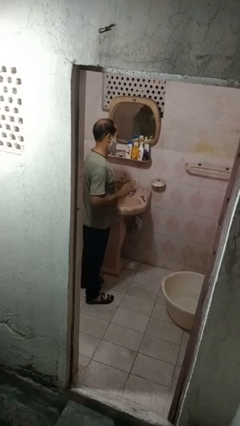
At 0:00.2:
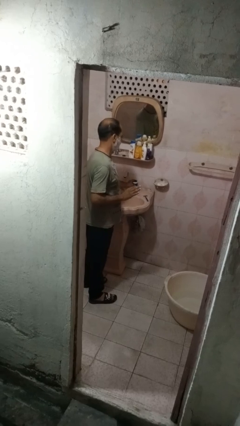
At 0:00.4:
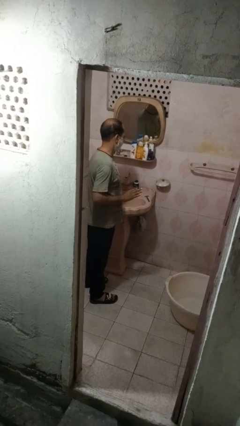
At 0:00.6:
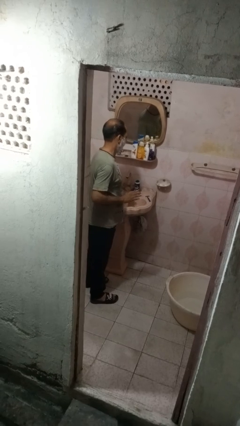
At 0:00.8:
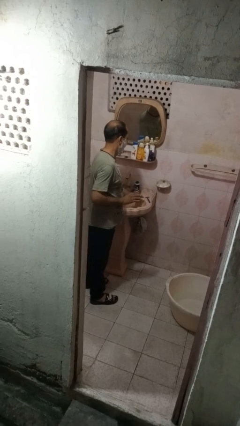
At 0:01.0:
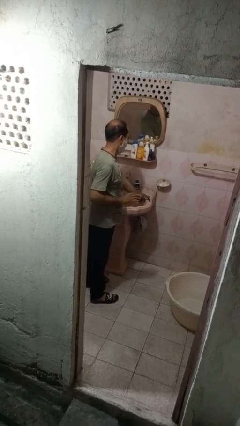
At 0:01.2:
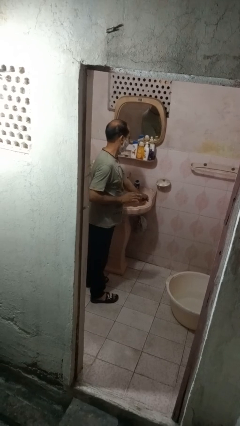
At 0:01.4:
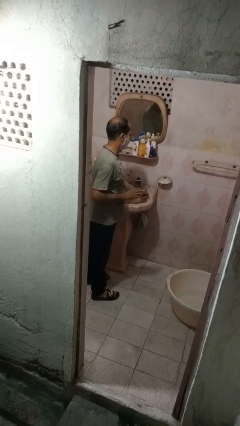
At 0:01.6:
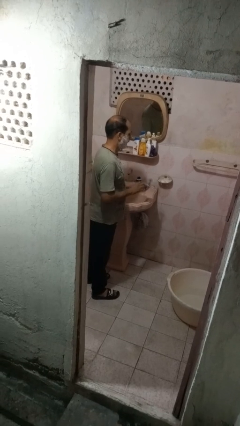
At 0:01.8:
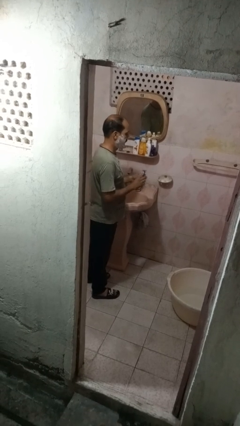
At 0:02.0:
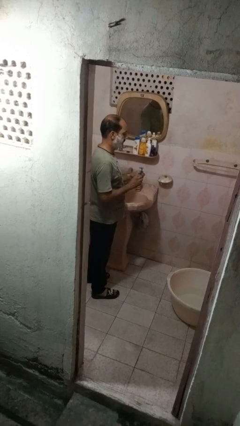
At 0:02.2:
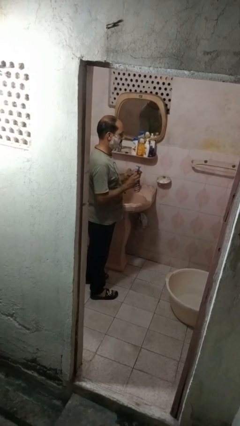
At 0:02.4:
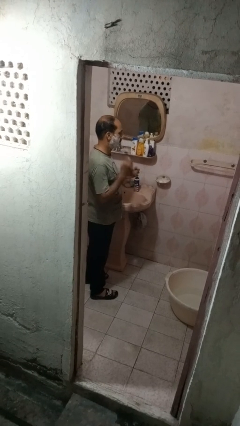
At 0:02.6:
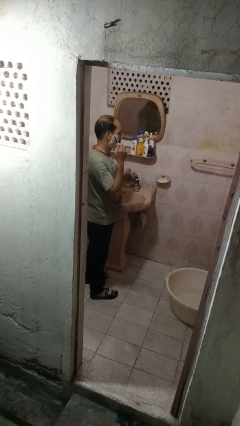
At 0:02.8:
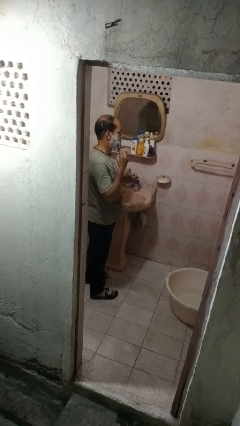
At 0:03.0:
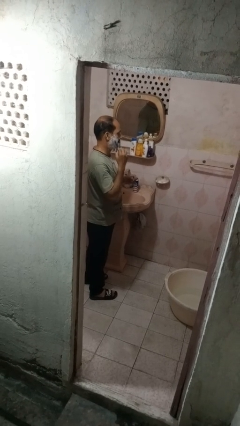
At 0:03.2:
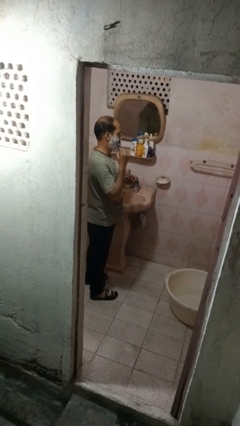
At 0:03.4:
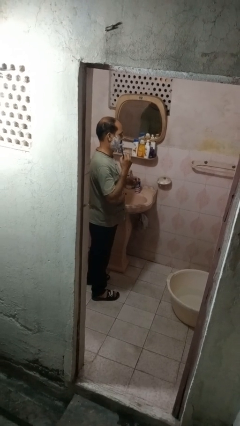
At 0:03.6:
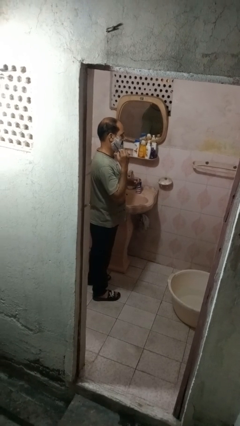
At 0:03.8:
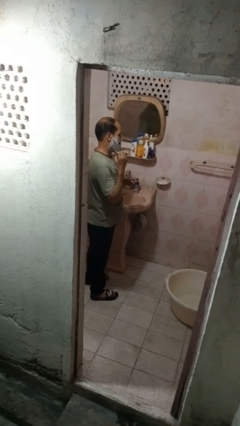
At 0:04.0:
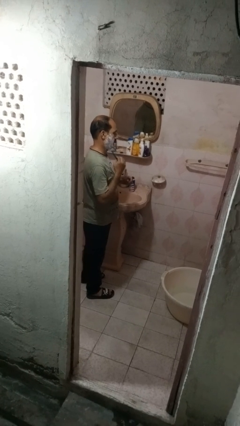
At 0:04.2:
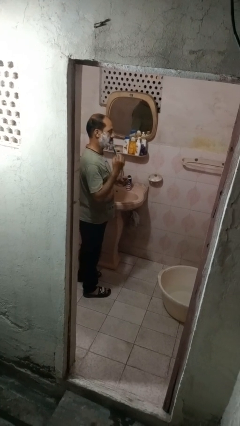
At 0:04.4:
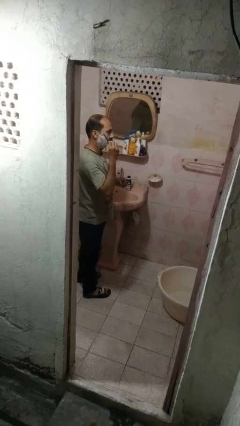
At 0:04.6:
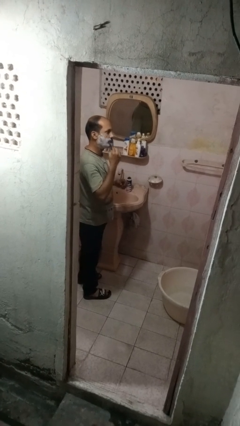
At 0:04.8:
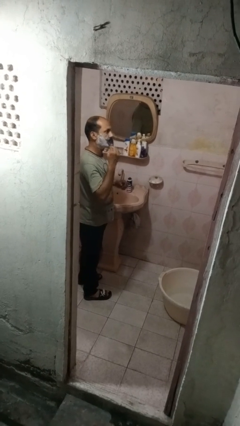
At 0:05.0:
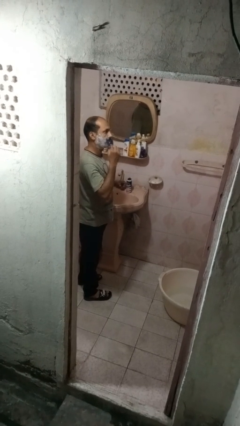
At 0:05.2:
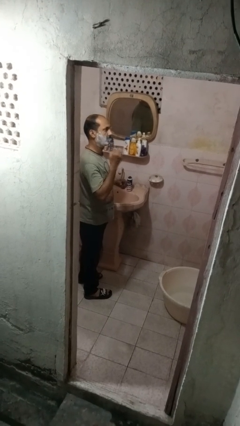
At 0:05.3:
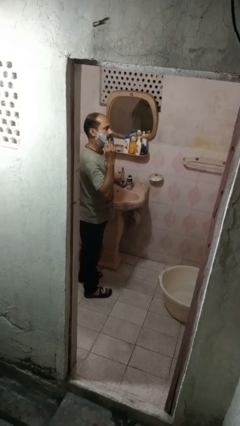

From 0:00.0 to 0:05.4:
person shaves face

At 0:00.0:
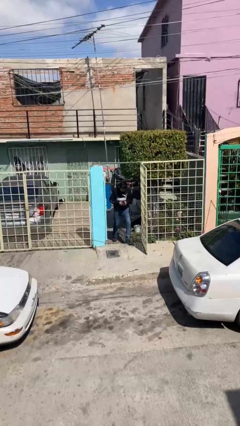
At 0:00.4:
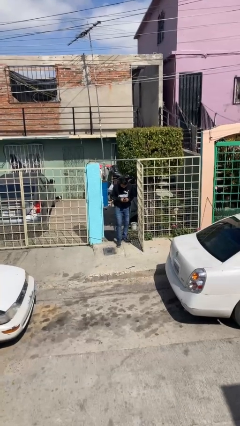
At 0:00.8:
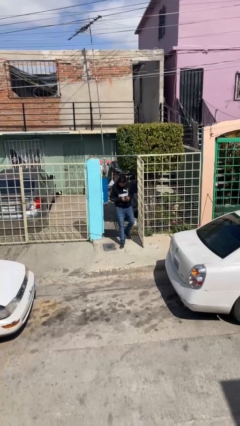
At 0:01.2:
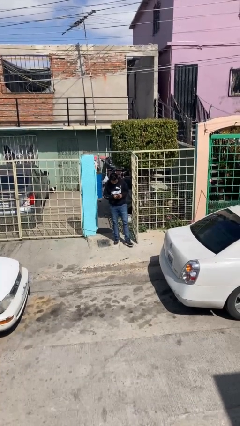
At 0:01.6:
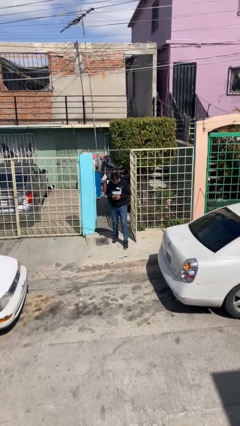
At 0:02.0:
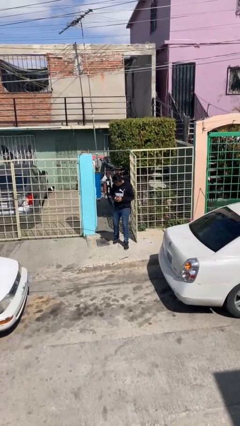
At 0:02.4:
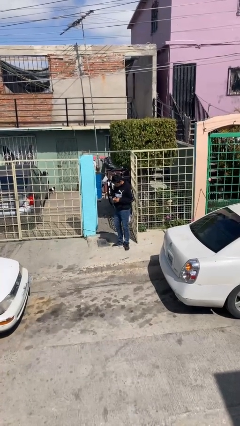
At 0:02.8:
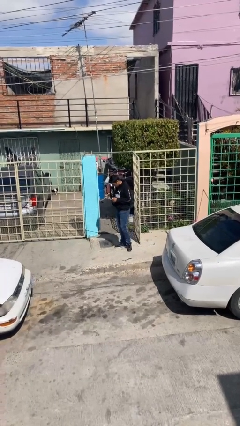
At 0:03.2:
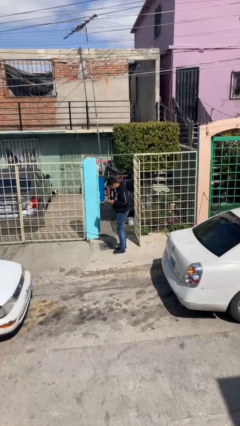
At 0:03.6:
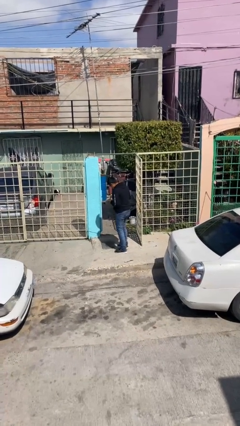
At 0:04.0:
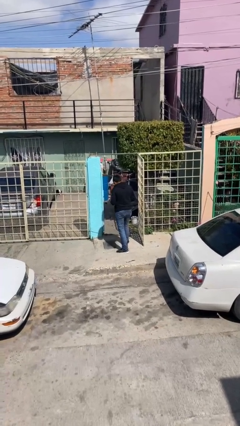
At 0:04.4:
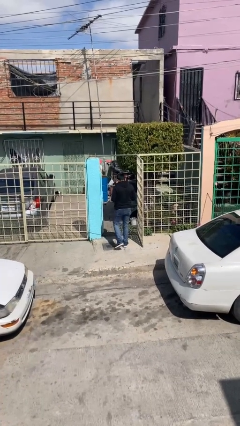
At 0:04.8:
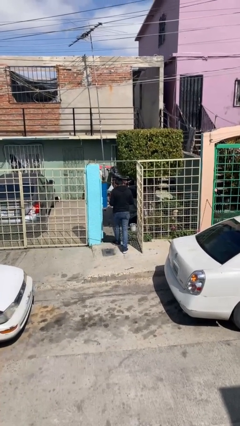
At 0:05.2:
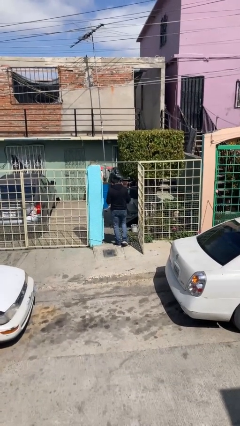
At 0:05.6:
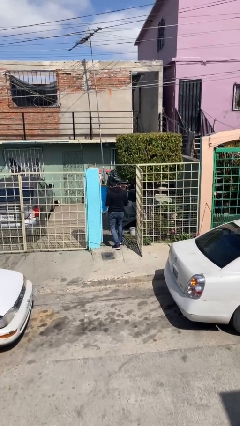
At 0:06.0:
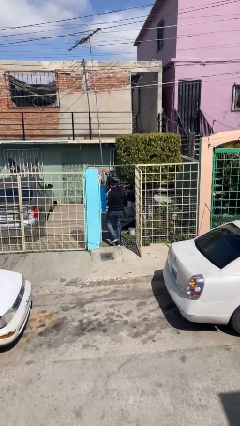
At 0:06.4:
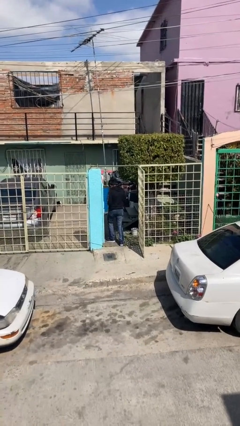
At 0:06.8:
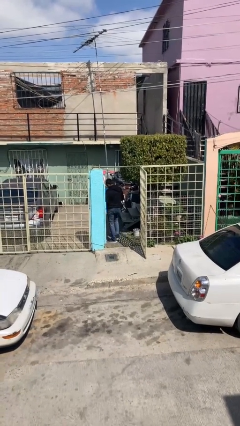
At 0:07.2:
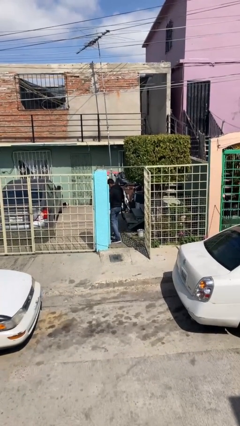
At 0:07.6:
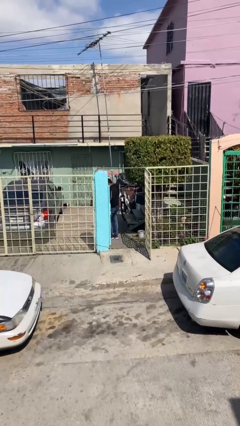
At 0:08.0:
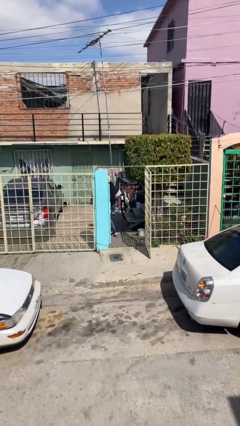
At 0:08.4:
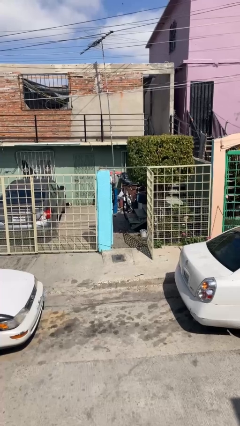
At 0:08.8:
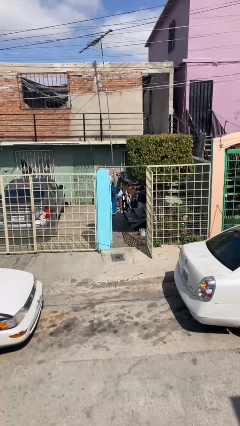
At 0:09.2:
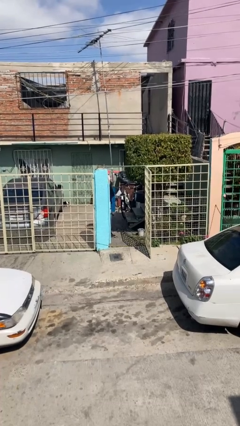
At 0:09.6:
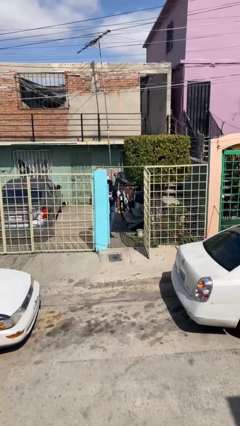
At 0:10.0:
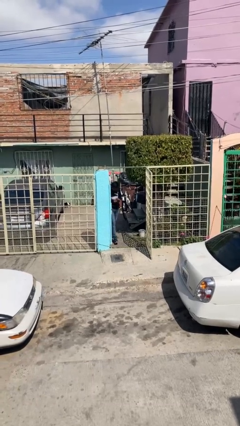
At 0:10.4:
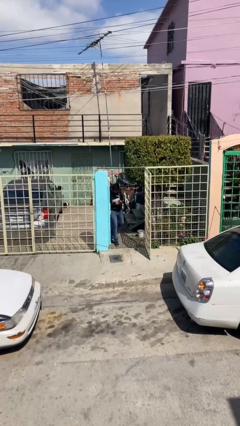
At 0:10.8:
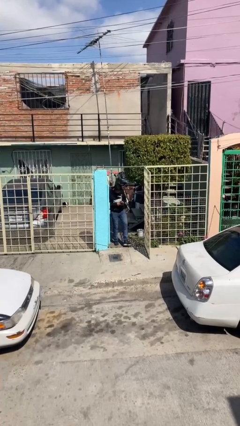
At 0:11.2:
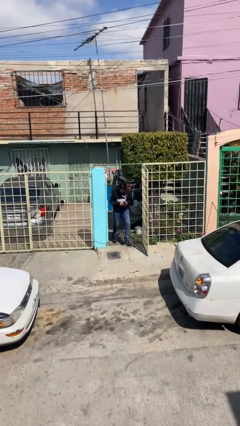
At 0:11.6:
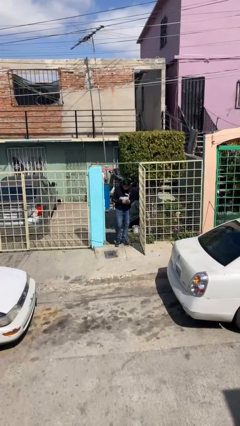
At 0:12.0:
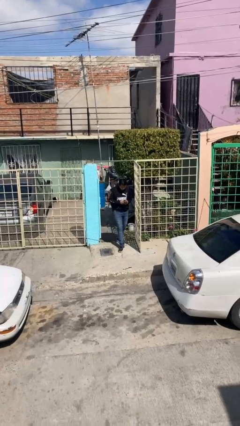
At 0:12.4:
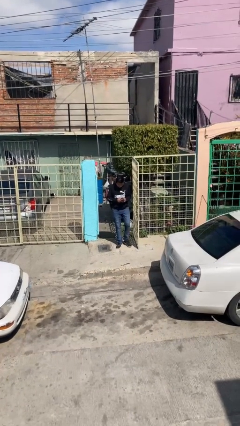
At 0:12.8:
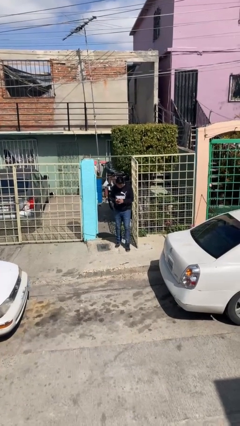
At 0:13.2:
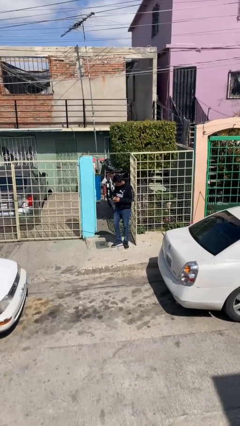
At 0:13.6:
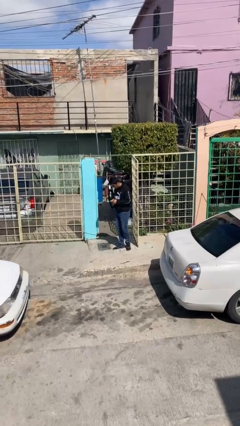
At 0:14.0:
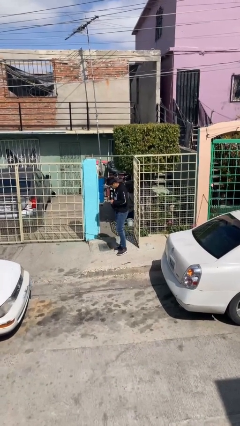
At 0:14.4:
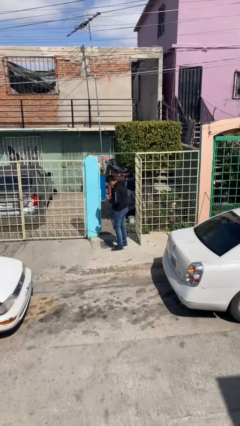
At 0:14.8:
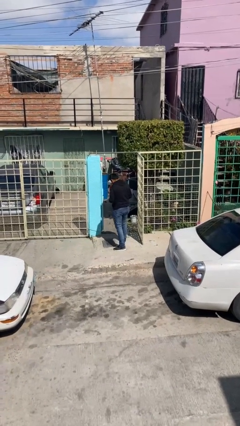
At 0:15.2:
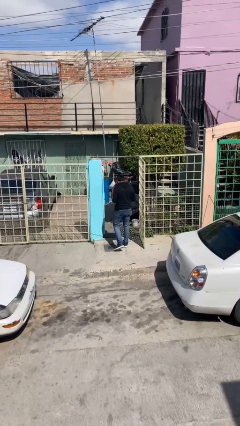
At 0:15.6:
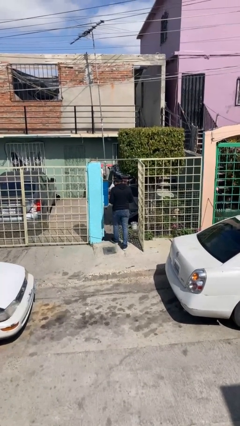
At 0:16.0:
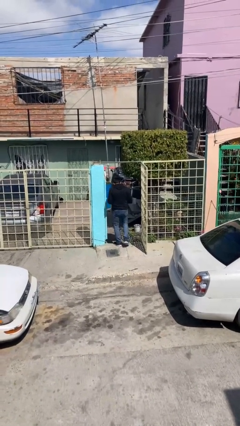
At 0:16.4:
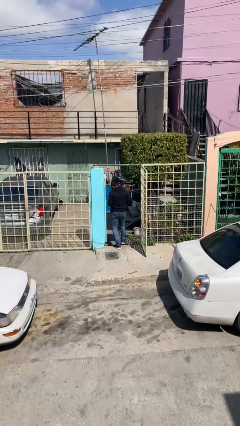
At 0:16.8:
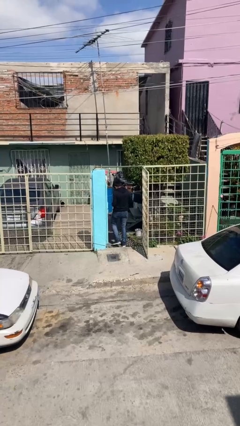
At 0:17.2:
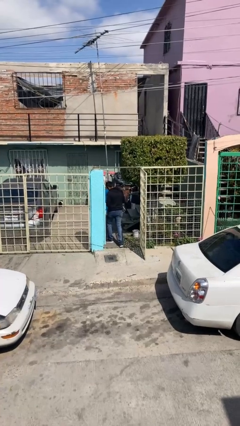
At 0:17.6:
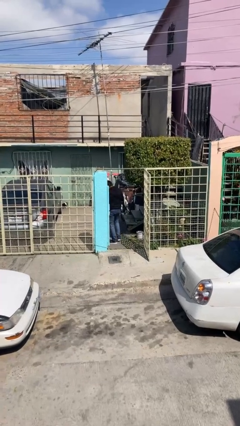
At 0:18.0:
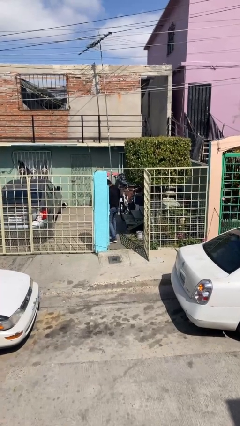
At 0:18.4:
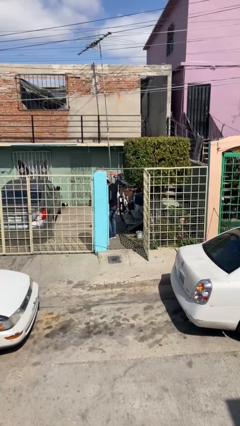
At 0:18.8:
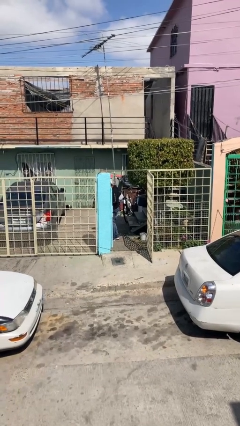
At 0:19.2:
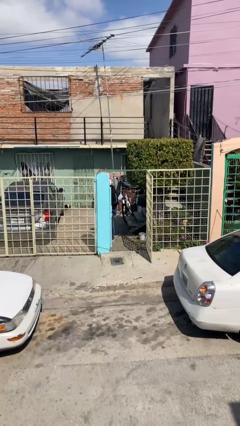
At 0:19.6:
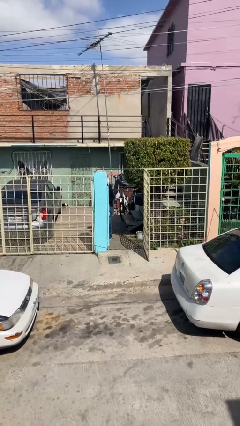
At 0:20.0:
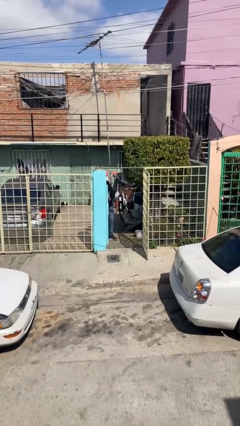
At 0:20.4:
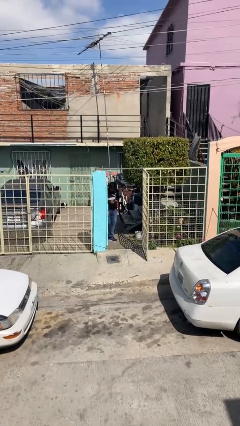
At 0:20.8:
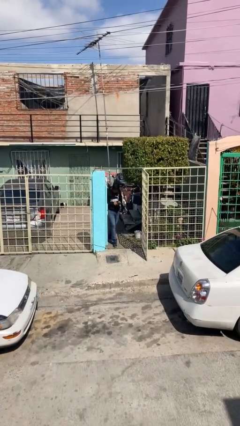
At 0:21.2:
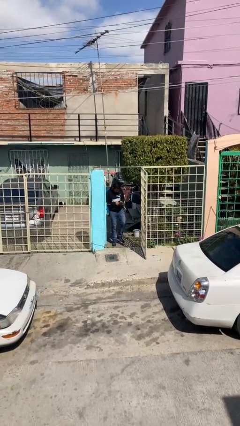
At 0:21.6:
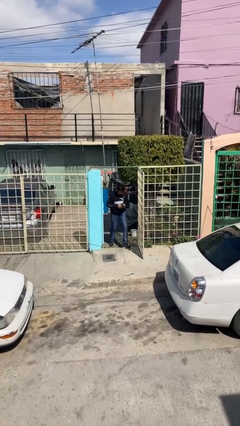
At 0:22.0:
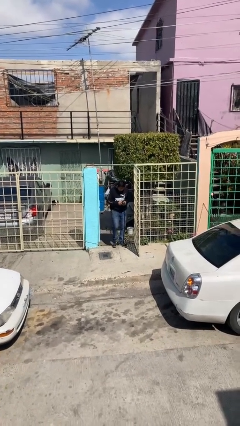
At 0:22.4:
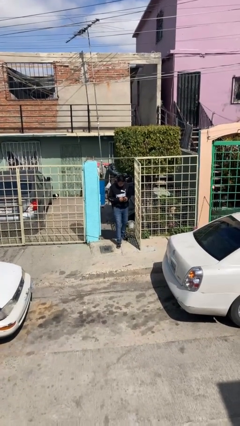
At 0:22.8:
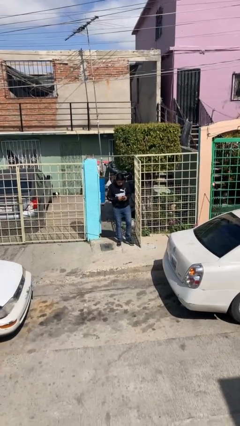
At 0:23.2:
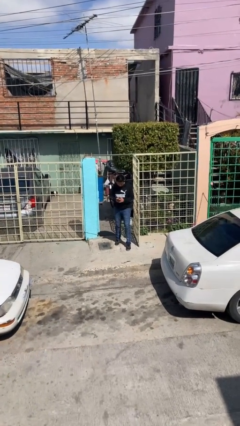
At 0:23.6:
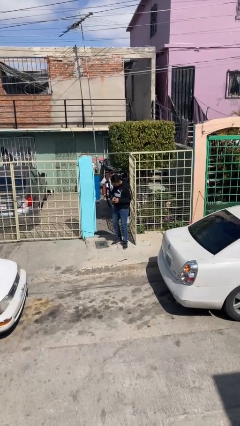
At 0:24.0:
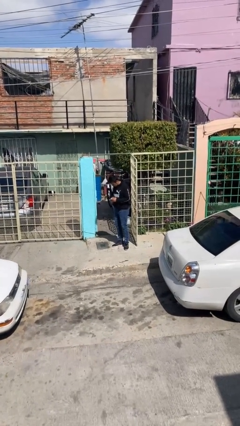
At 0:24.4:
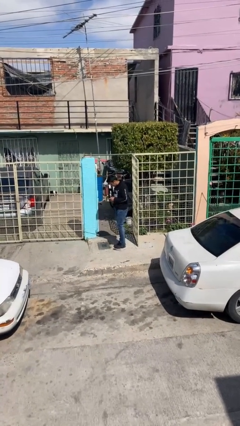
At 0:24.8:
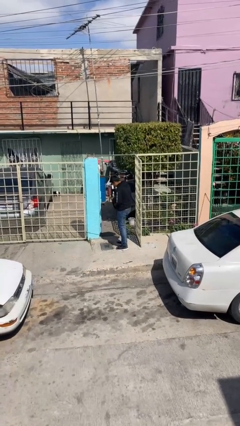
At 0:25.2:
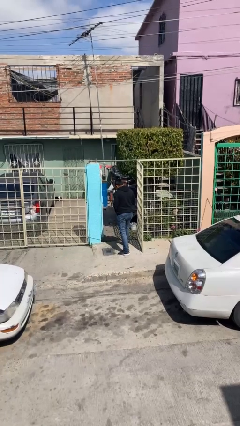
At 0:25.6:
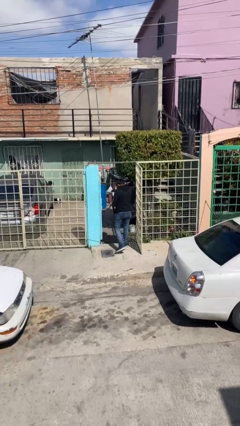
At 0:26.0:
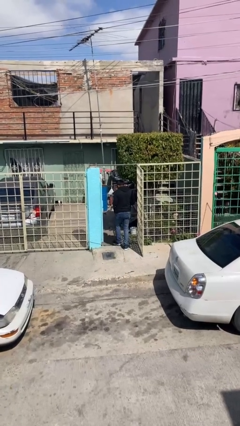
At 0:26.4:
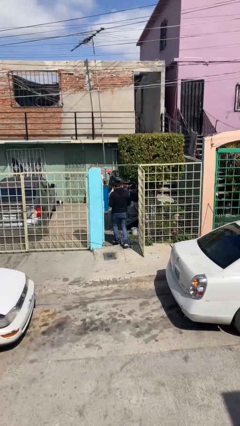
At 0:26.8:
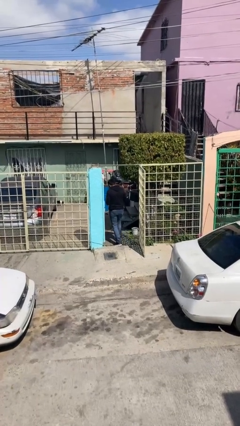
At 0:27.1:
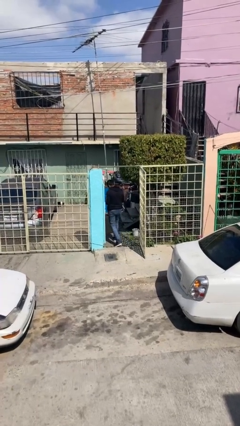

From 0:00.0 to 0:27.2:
person texts on phone
